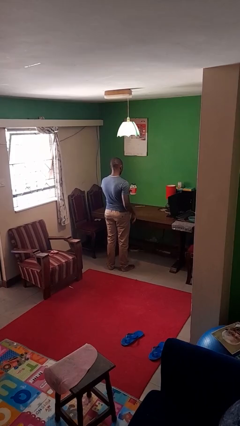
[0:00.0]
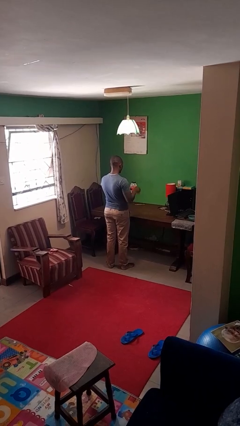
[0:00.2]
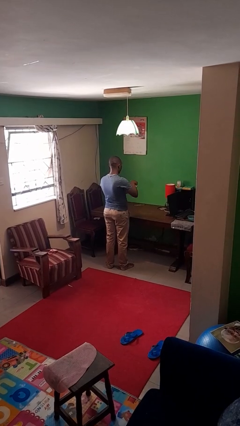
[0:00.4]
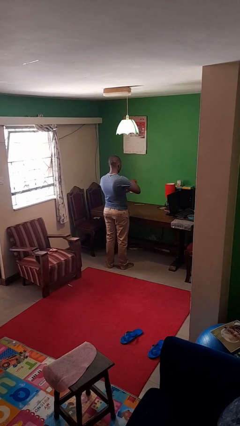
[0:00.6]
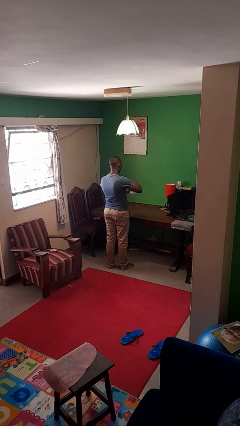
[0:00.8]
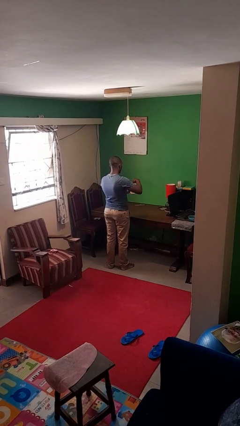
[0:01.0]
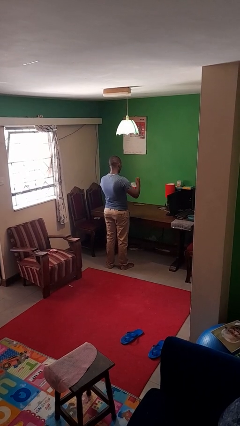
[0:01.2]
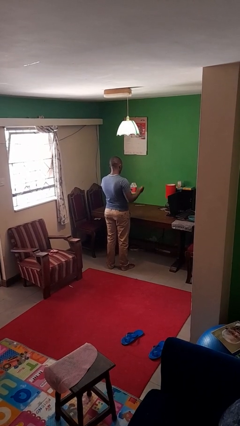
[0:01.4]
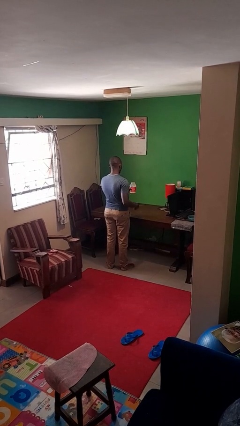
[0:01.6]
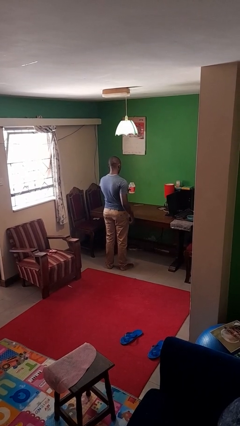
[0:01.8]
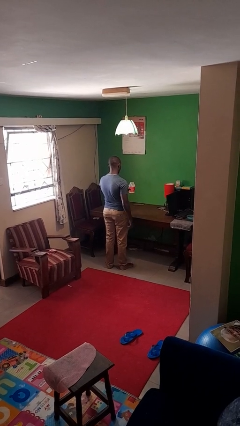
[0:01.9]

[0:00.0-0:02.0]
person opens jar

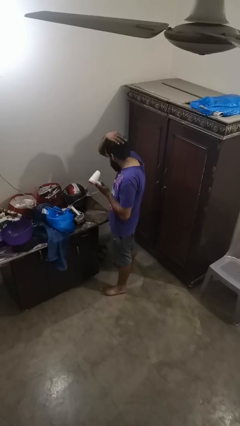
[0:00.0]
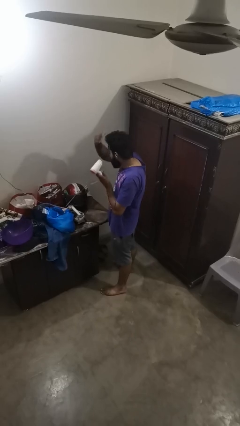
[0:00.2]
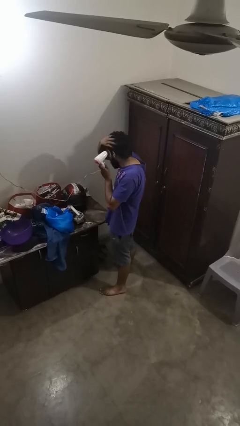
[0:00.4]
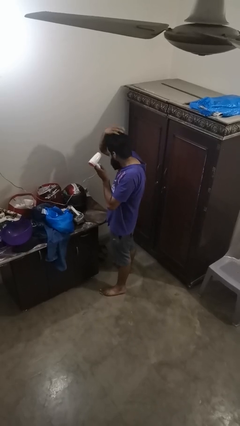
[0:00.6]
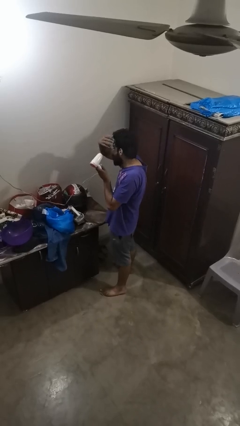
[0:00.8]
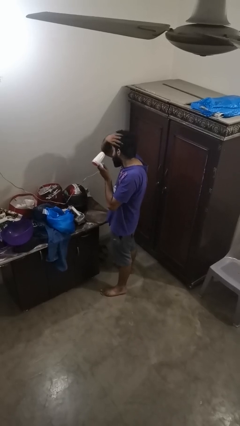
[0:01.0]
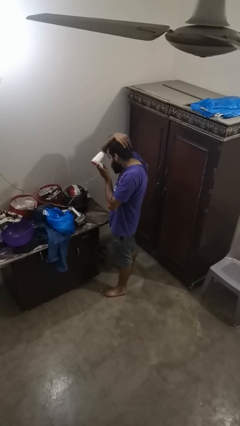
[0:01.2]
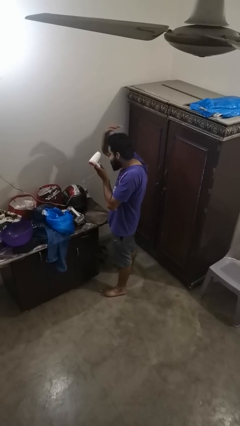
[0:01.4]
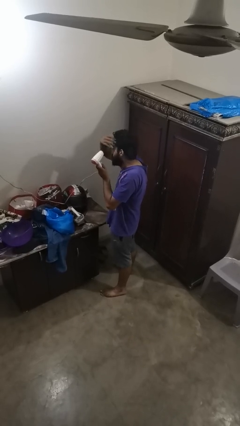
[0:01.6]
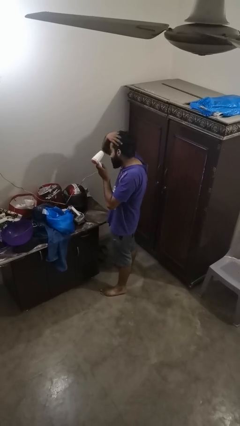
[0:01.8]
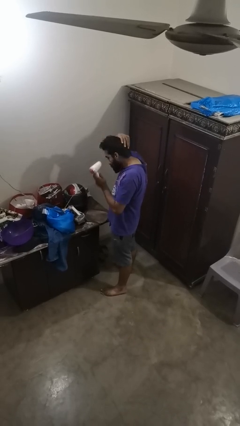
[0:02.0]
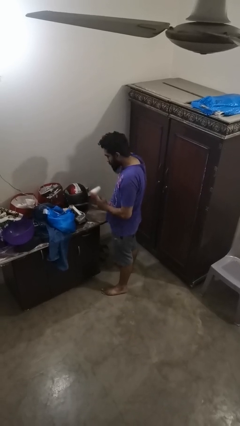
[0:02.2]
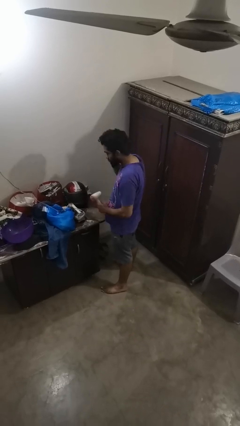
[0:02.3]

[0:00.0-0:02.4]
person dries hair with hairdryer

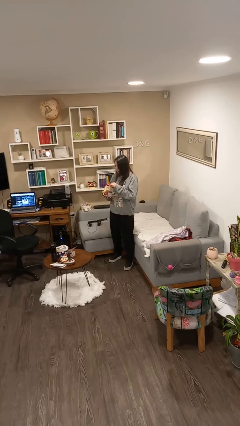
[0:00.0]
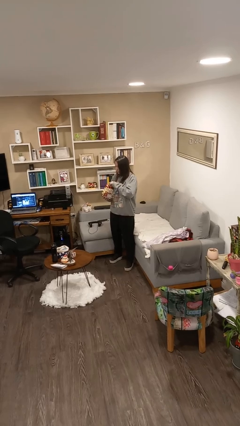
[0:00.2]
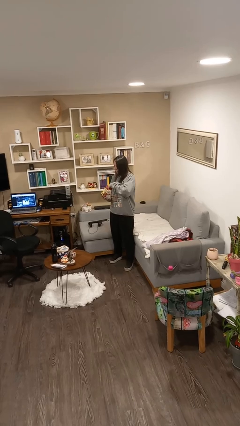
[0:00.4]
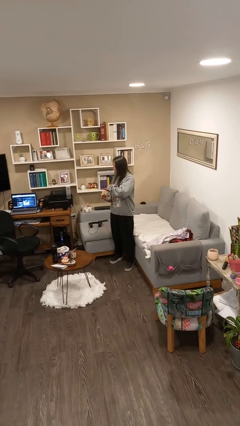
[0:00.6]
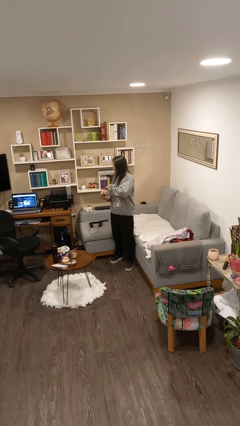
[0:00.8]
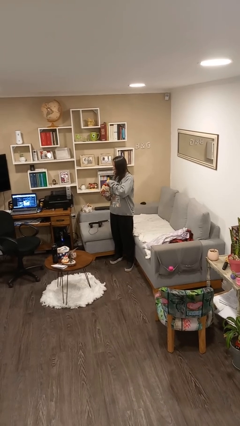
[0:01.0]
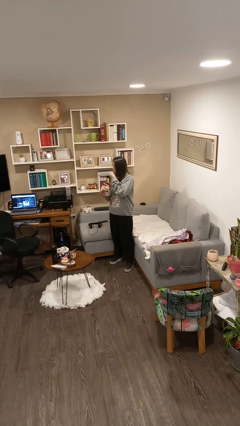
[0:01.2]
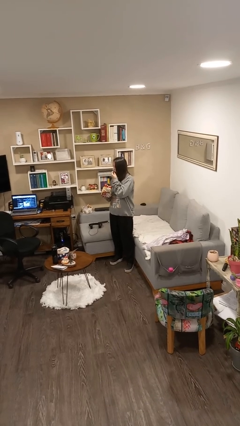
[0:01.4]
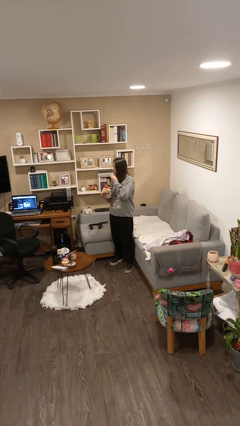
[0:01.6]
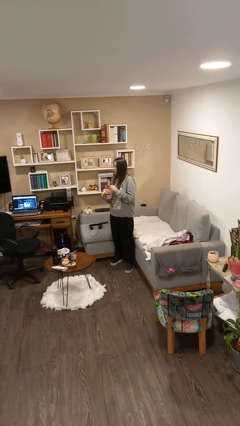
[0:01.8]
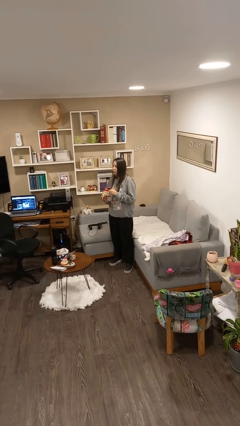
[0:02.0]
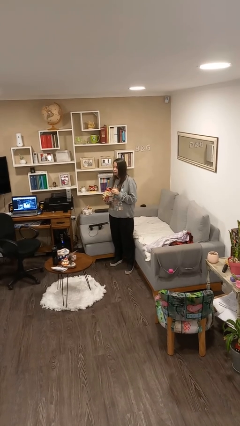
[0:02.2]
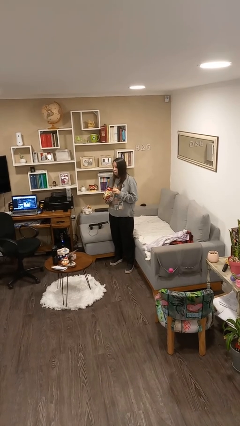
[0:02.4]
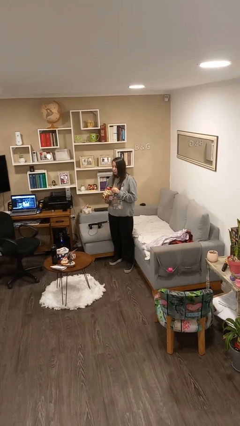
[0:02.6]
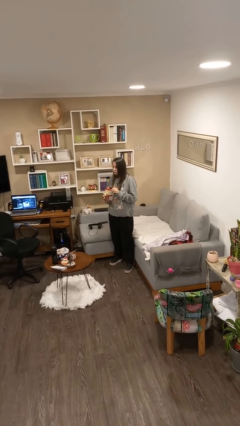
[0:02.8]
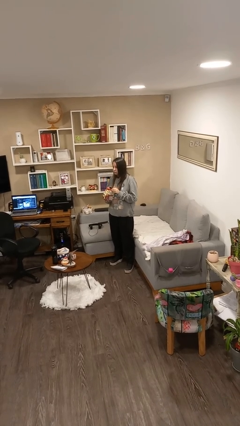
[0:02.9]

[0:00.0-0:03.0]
person eats snack from bag

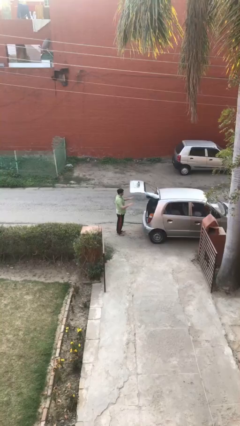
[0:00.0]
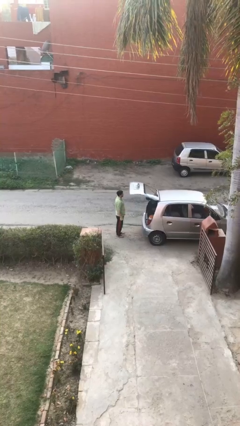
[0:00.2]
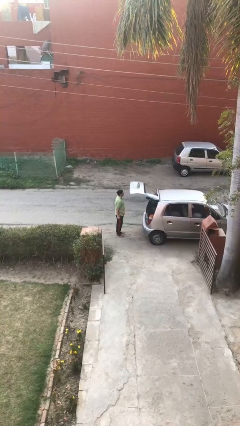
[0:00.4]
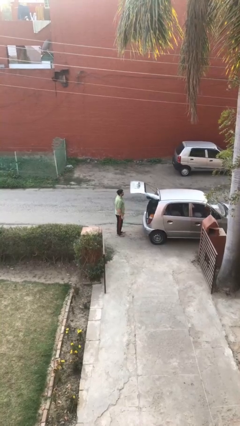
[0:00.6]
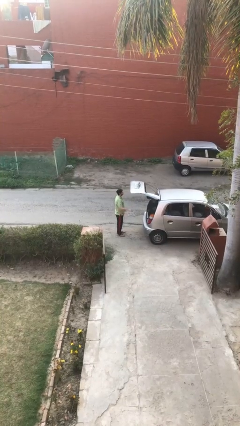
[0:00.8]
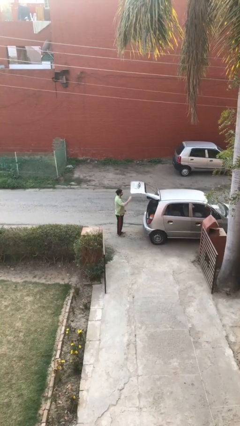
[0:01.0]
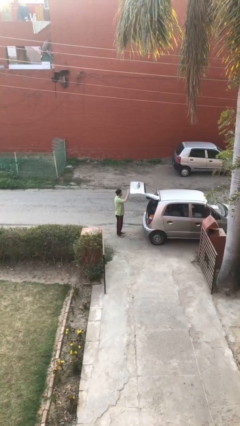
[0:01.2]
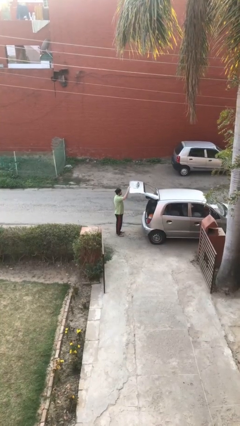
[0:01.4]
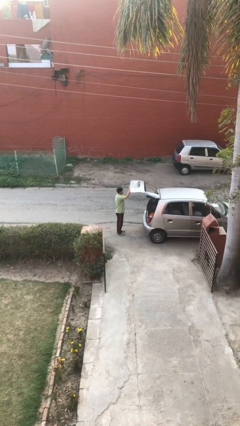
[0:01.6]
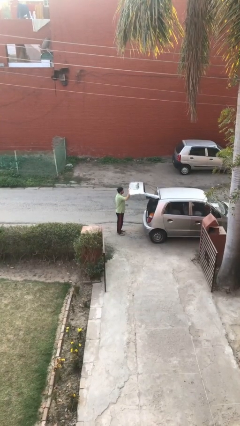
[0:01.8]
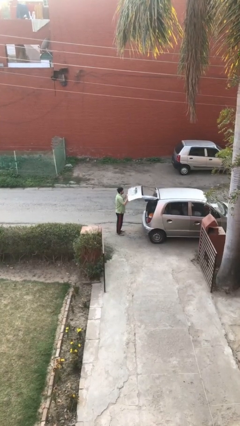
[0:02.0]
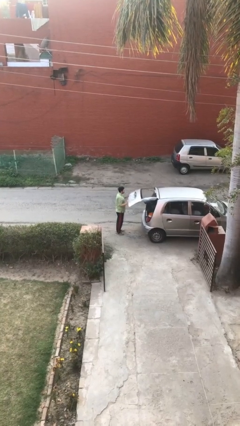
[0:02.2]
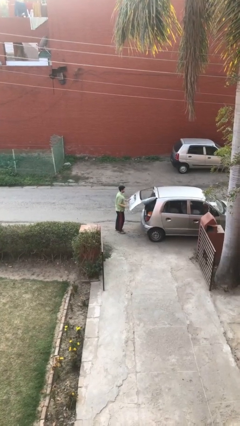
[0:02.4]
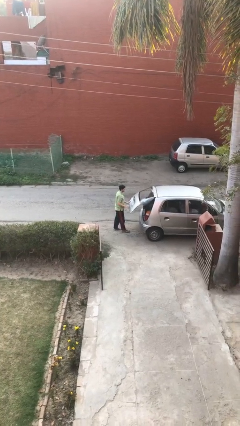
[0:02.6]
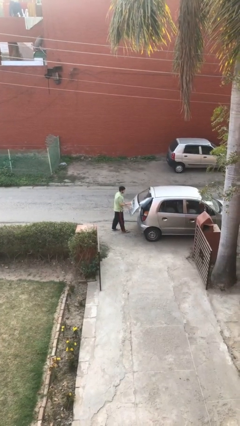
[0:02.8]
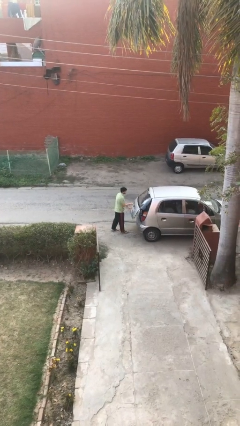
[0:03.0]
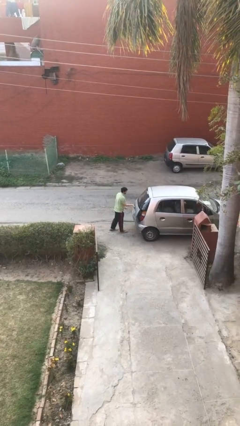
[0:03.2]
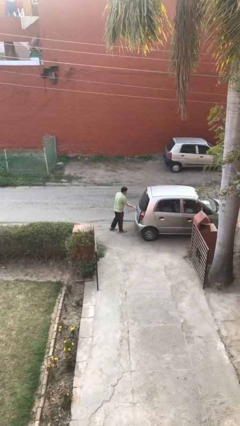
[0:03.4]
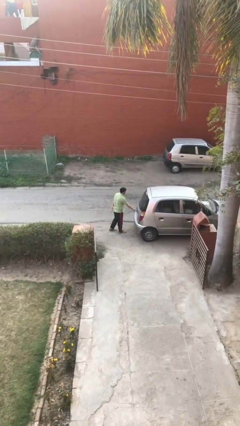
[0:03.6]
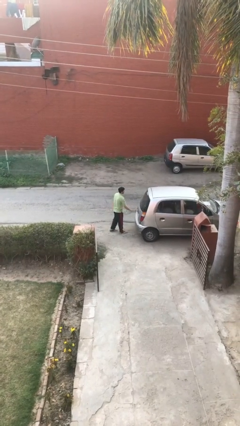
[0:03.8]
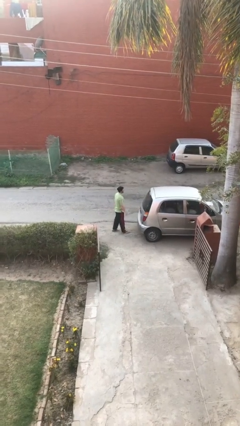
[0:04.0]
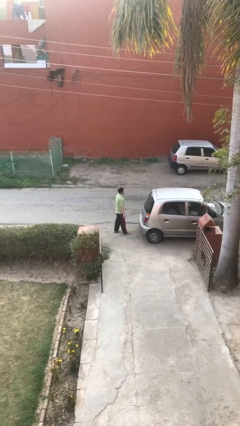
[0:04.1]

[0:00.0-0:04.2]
person closes car trunk

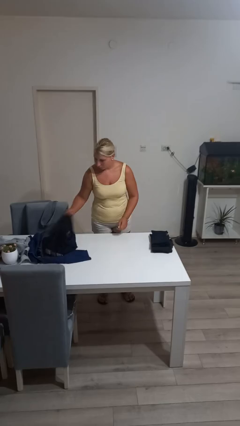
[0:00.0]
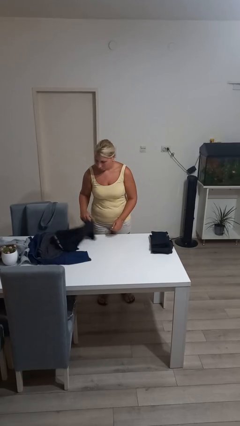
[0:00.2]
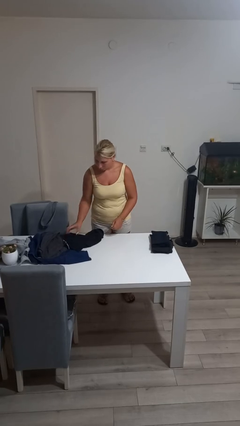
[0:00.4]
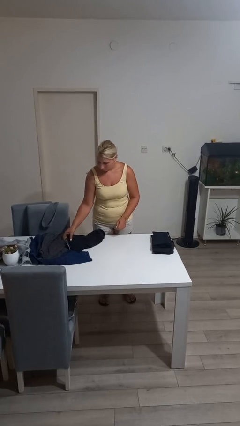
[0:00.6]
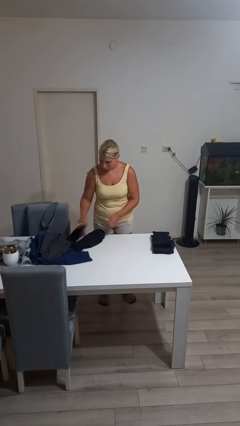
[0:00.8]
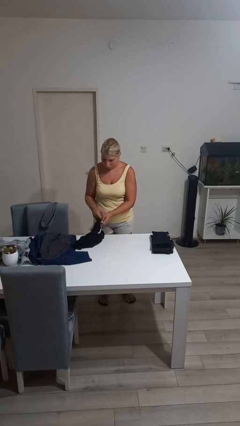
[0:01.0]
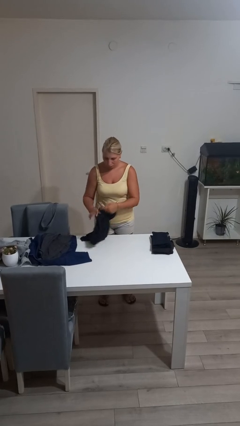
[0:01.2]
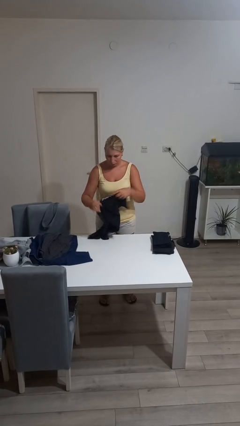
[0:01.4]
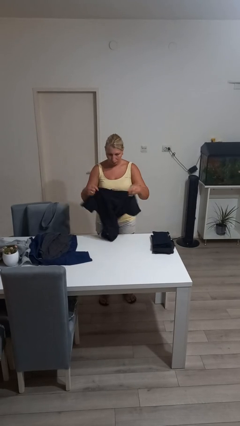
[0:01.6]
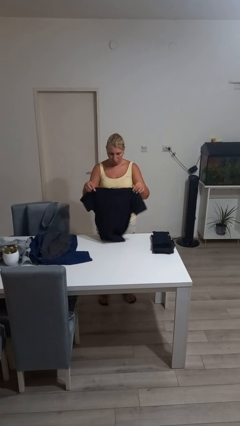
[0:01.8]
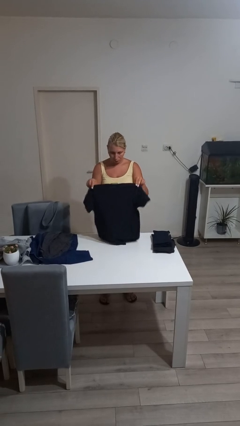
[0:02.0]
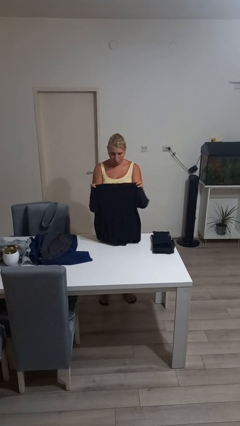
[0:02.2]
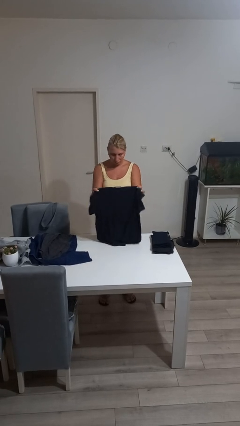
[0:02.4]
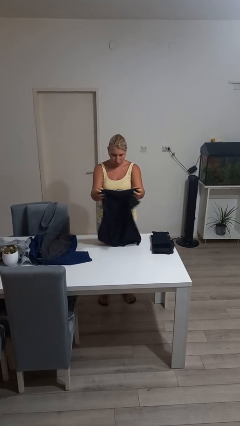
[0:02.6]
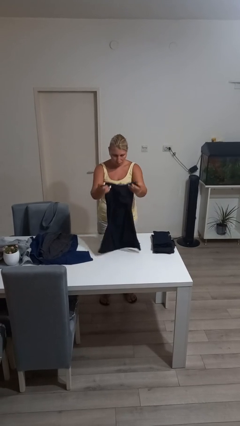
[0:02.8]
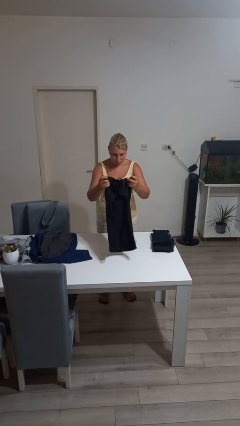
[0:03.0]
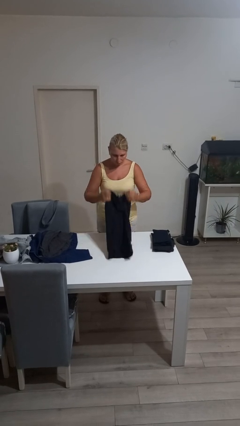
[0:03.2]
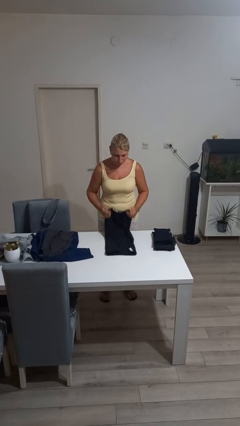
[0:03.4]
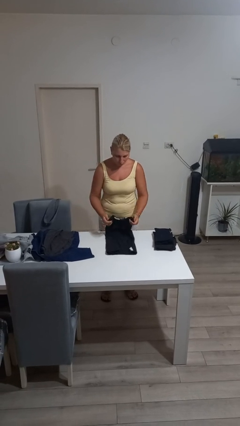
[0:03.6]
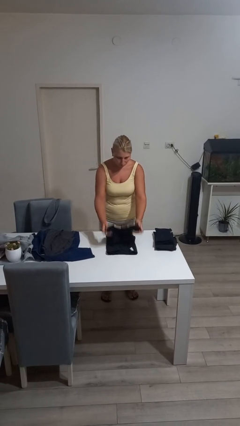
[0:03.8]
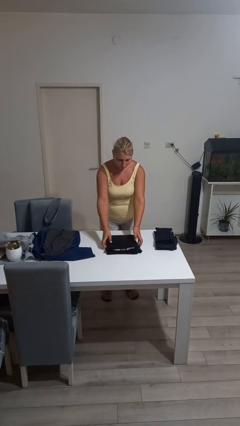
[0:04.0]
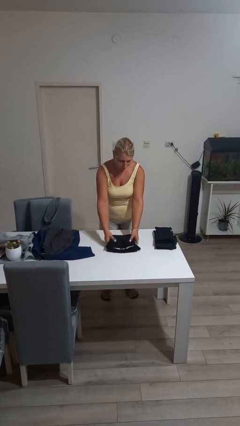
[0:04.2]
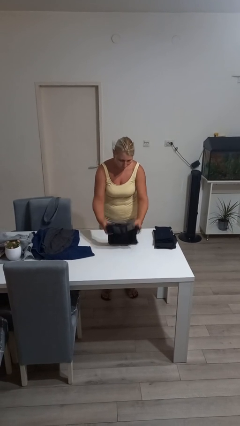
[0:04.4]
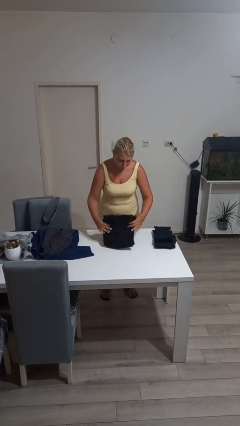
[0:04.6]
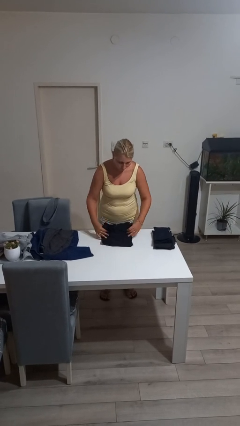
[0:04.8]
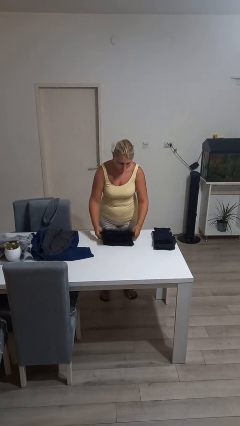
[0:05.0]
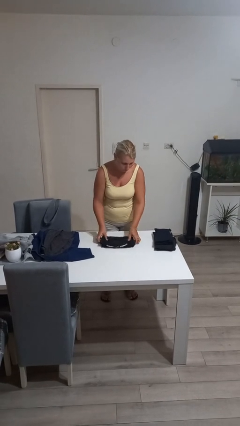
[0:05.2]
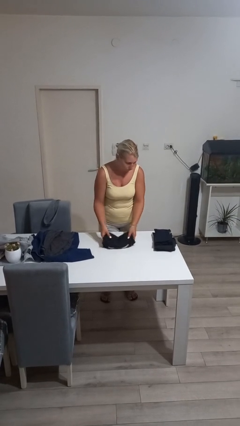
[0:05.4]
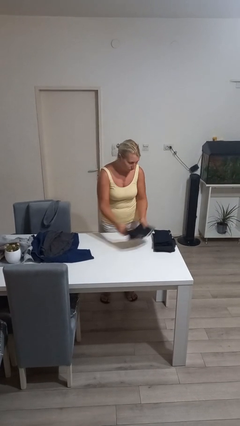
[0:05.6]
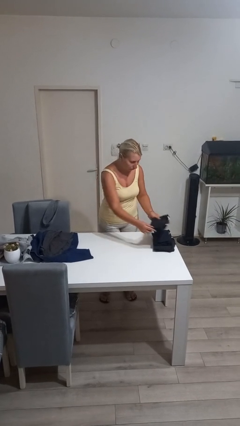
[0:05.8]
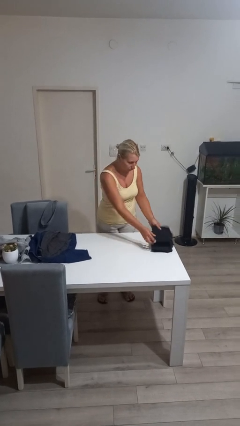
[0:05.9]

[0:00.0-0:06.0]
person folds shirt

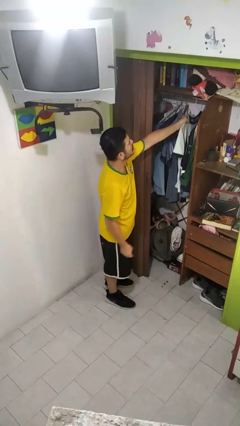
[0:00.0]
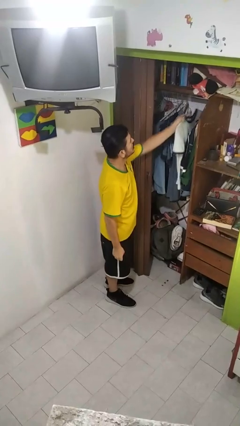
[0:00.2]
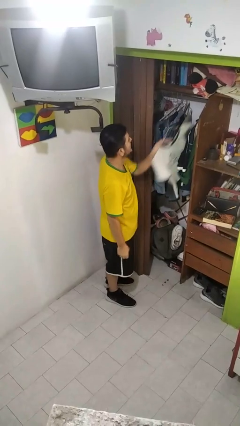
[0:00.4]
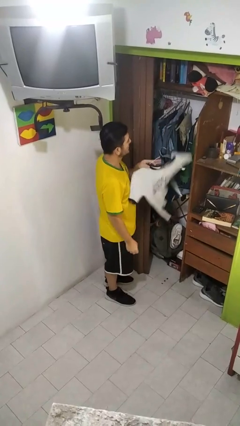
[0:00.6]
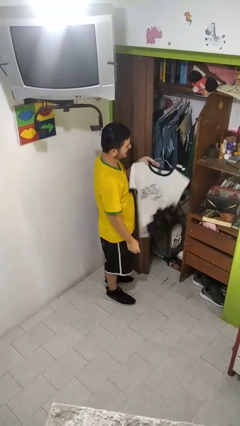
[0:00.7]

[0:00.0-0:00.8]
person takes clothes from closet
